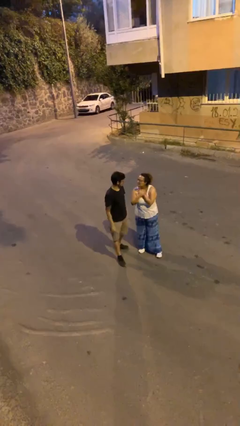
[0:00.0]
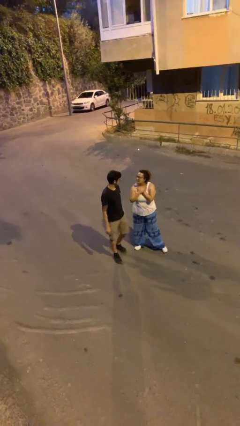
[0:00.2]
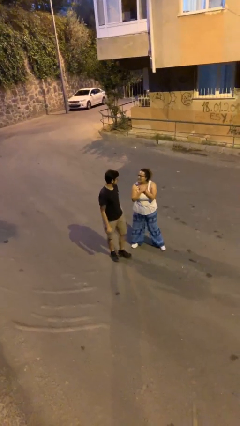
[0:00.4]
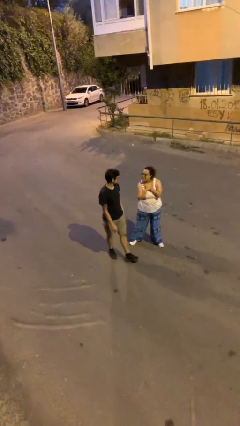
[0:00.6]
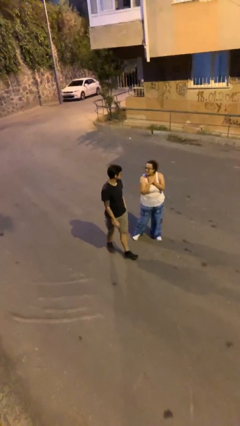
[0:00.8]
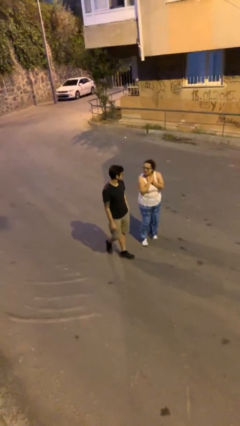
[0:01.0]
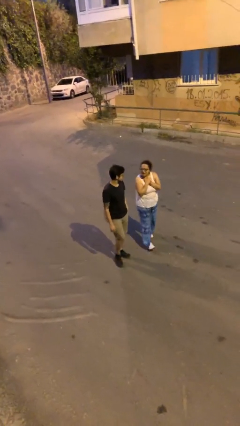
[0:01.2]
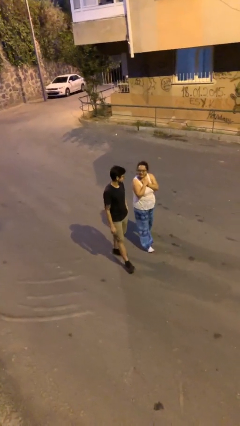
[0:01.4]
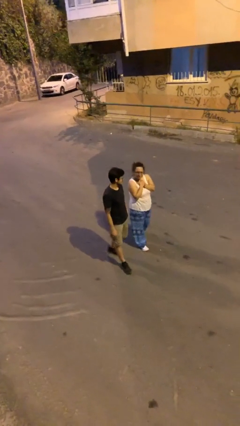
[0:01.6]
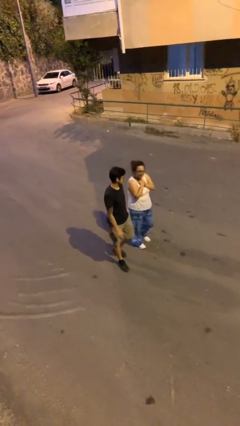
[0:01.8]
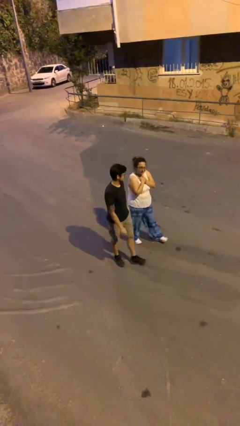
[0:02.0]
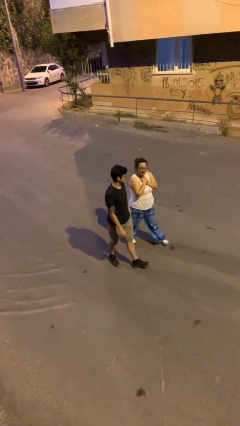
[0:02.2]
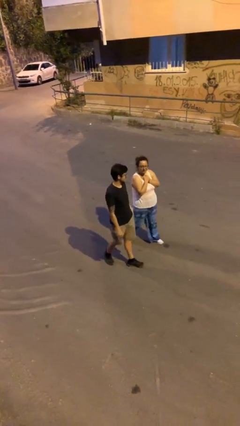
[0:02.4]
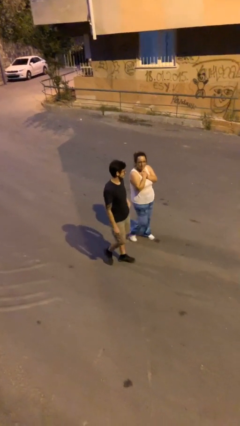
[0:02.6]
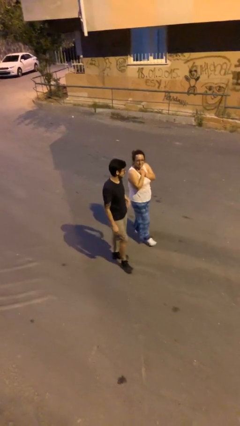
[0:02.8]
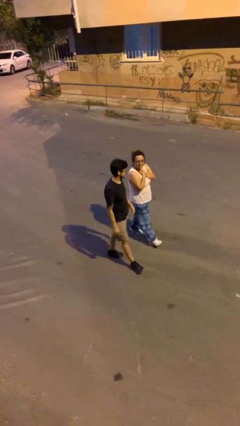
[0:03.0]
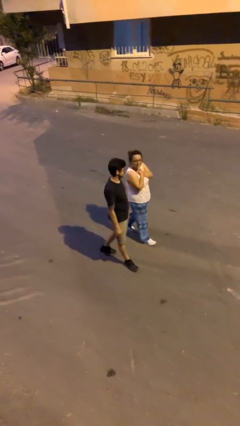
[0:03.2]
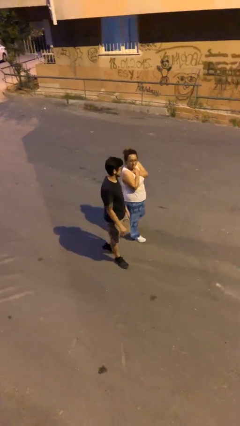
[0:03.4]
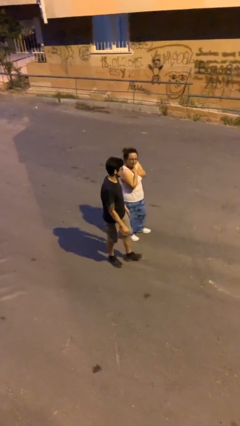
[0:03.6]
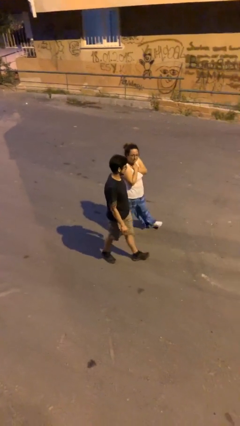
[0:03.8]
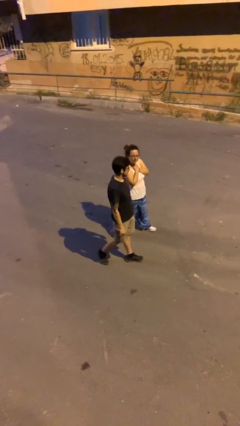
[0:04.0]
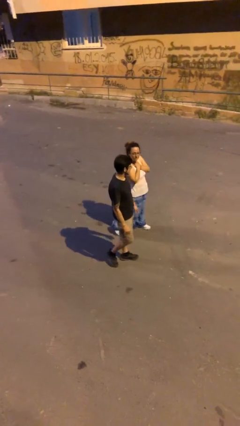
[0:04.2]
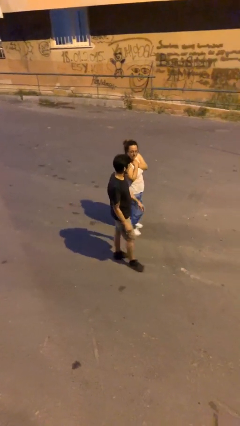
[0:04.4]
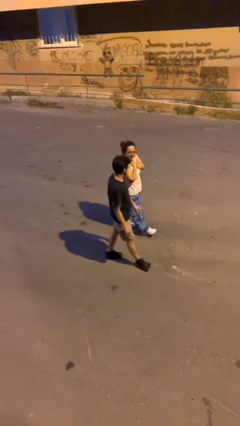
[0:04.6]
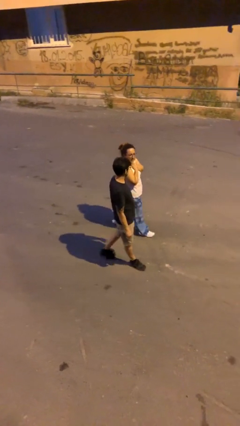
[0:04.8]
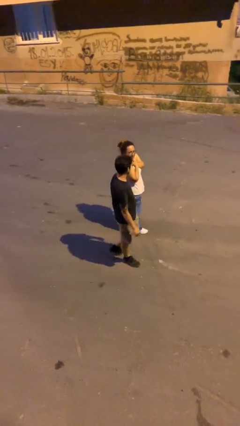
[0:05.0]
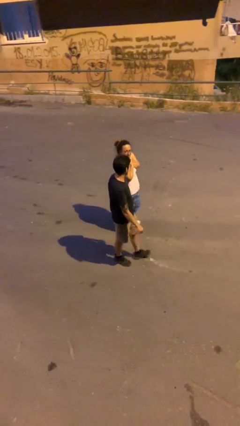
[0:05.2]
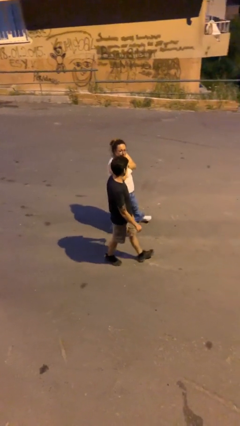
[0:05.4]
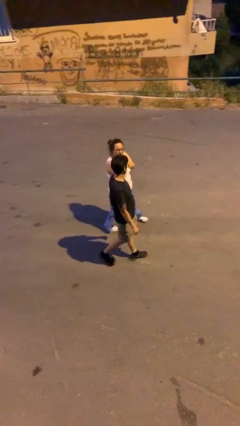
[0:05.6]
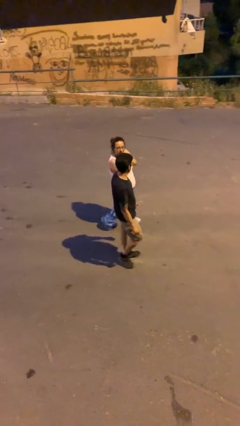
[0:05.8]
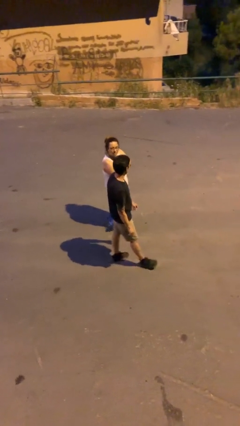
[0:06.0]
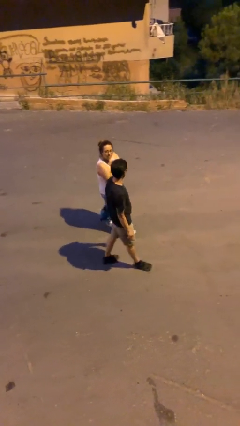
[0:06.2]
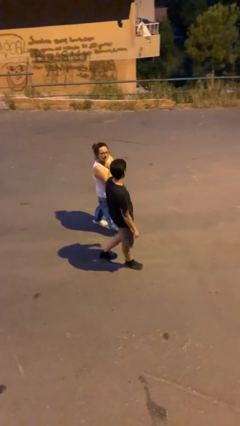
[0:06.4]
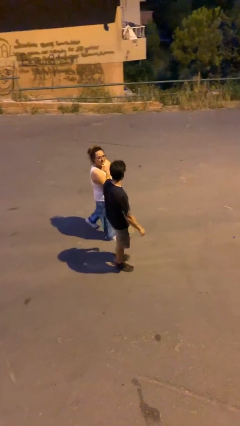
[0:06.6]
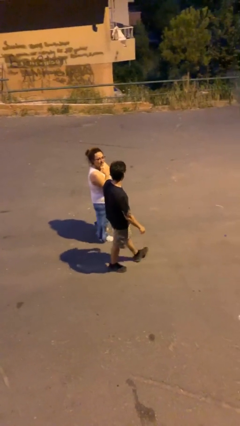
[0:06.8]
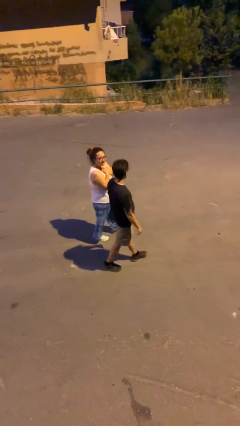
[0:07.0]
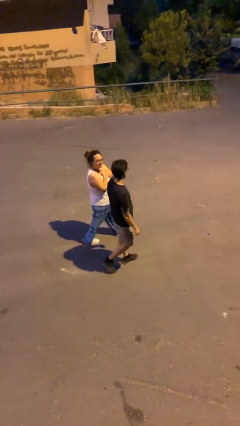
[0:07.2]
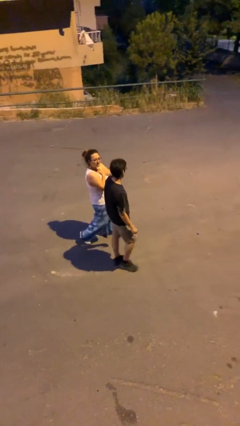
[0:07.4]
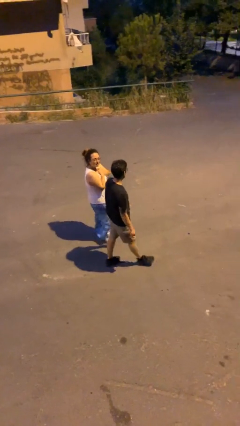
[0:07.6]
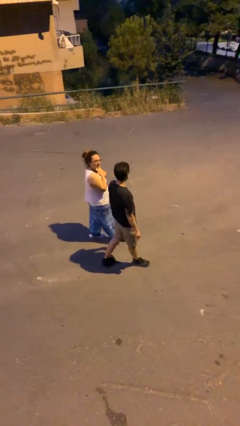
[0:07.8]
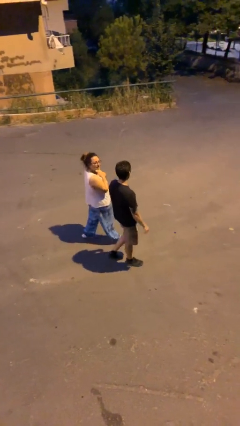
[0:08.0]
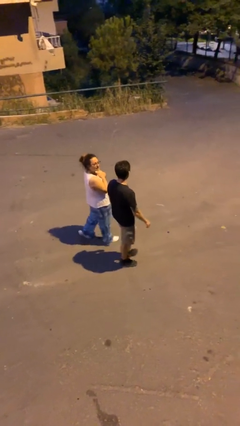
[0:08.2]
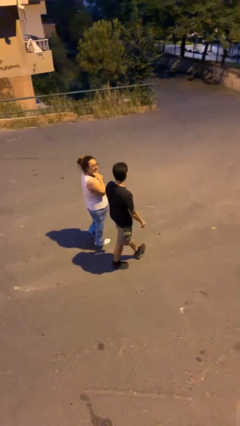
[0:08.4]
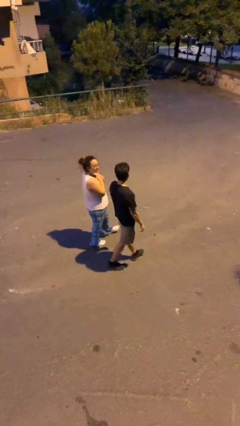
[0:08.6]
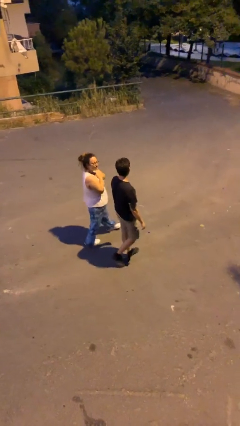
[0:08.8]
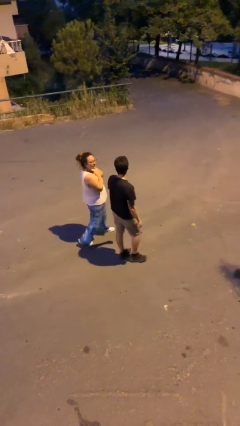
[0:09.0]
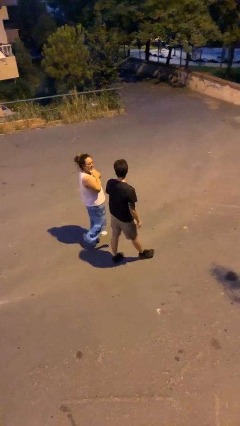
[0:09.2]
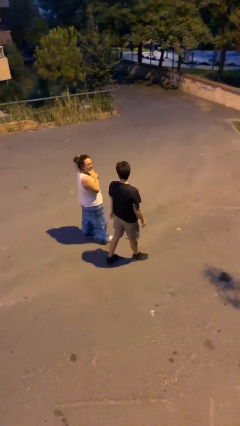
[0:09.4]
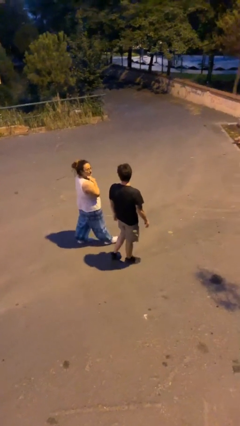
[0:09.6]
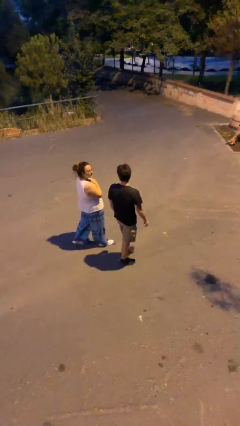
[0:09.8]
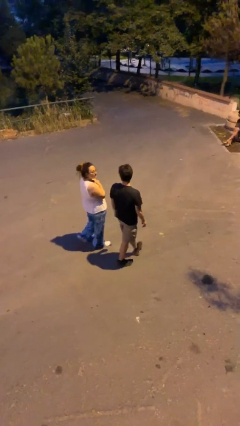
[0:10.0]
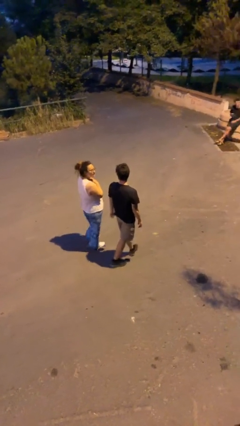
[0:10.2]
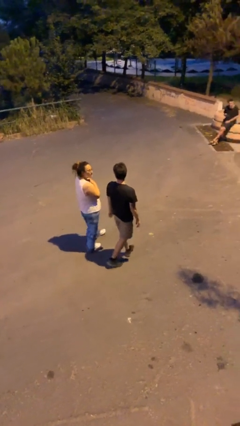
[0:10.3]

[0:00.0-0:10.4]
person talks to person

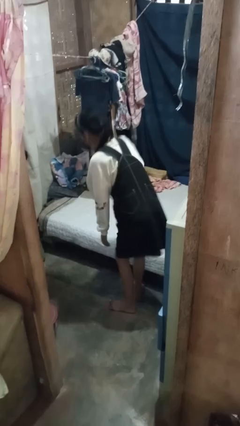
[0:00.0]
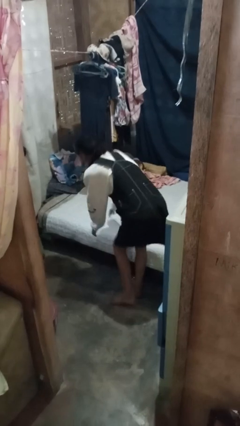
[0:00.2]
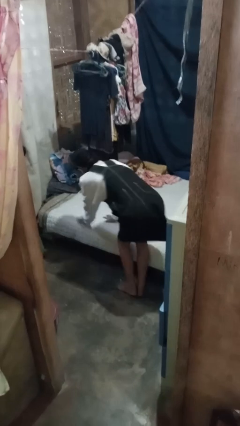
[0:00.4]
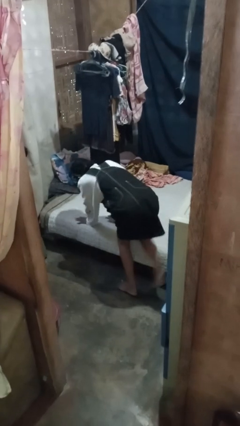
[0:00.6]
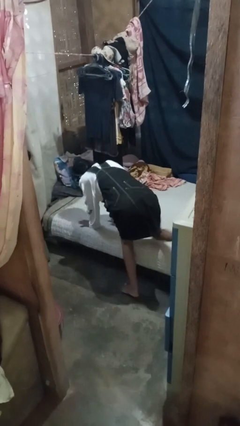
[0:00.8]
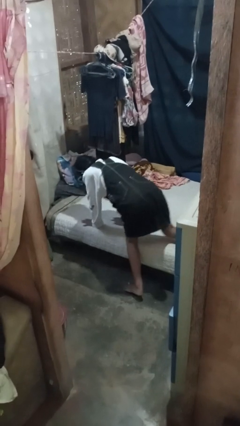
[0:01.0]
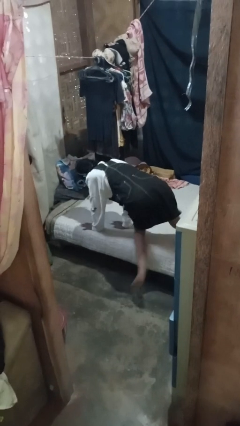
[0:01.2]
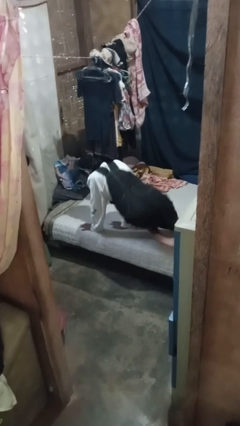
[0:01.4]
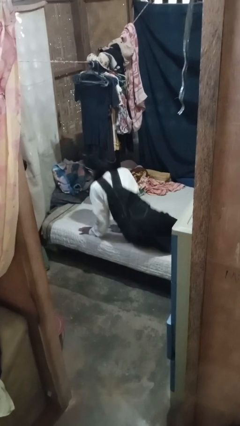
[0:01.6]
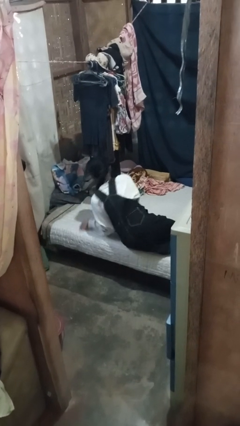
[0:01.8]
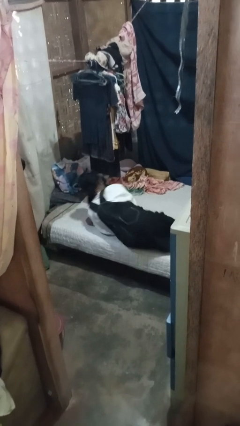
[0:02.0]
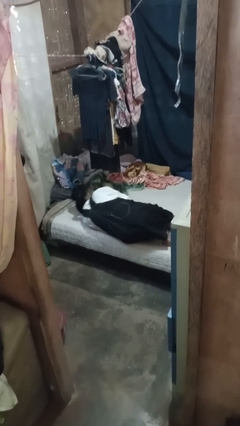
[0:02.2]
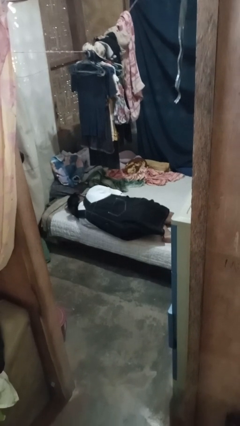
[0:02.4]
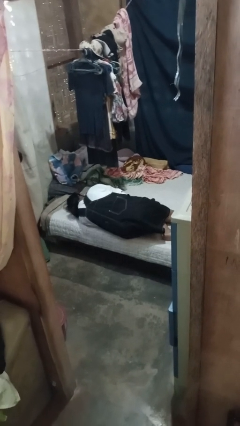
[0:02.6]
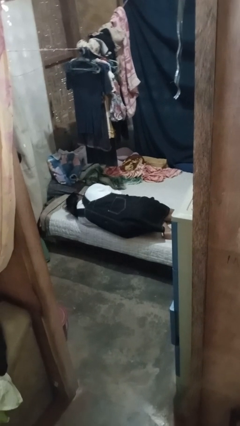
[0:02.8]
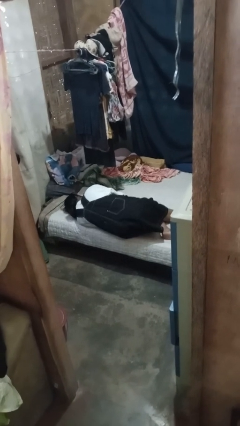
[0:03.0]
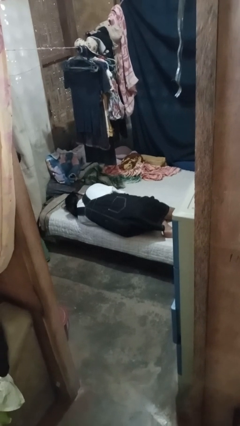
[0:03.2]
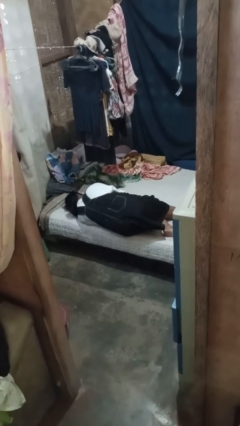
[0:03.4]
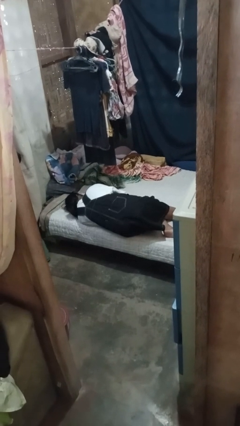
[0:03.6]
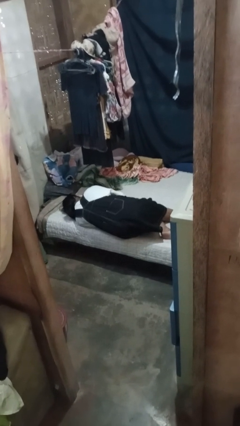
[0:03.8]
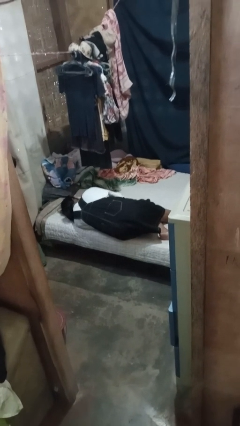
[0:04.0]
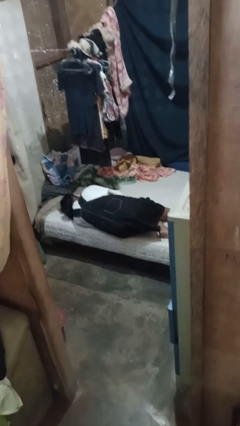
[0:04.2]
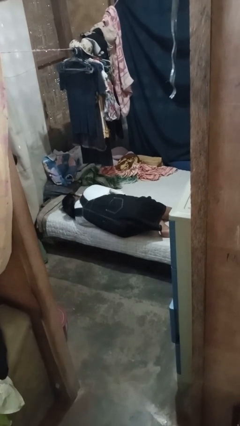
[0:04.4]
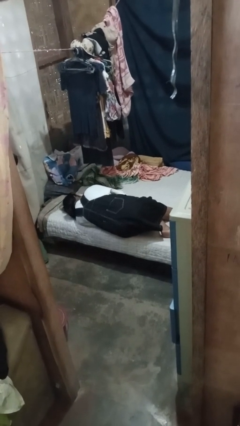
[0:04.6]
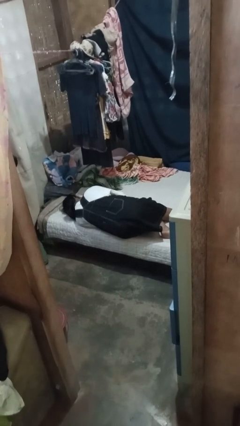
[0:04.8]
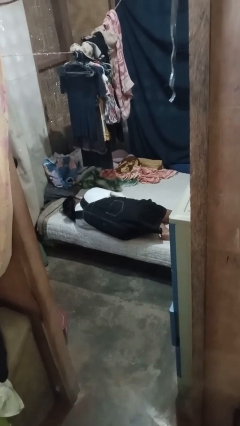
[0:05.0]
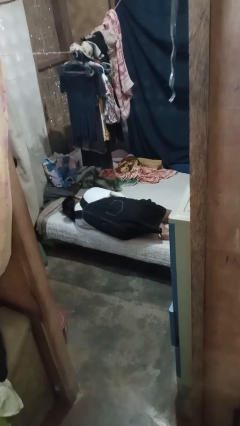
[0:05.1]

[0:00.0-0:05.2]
person lies down on bed

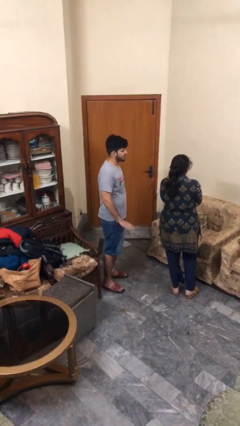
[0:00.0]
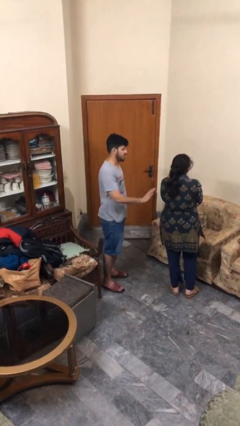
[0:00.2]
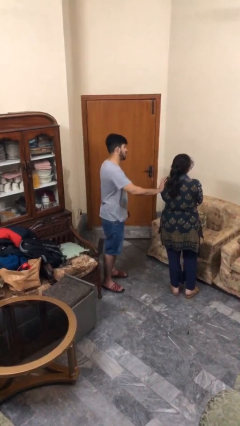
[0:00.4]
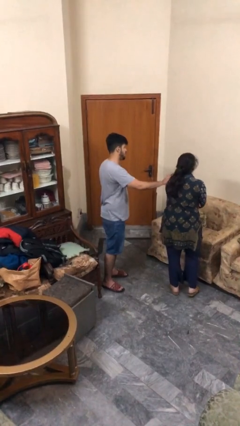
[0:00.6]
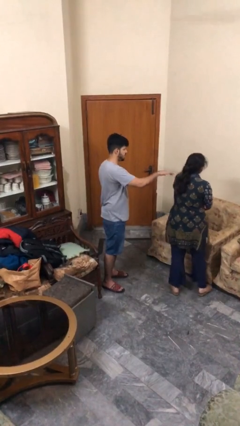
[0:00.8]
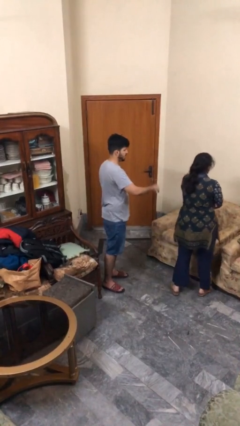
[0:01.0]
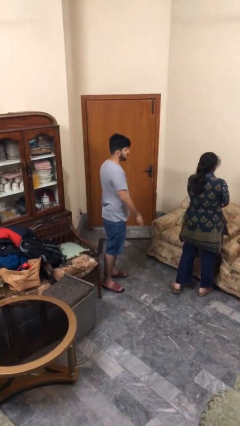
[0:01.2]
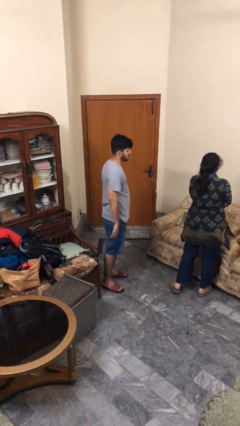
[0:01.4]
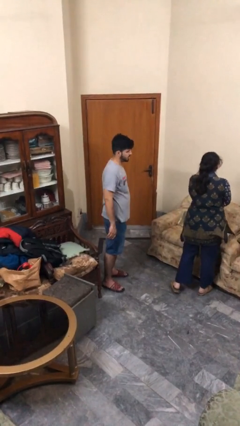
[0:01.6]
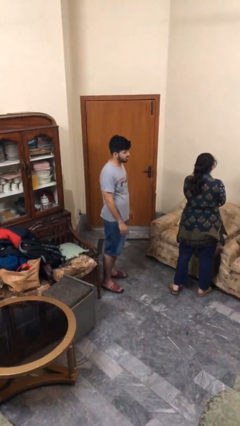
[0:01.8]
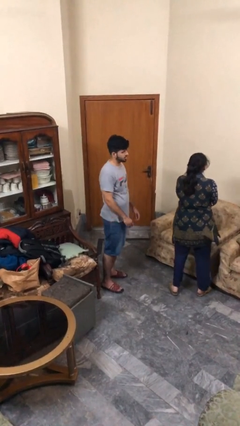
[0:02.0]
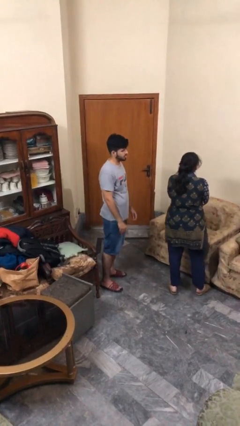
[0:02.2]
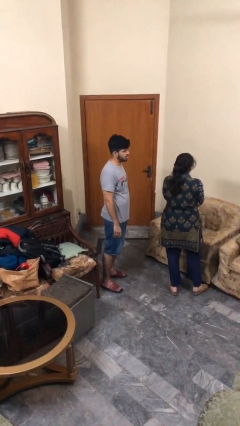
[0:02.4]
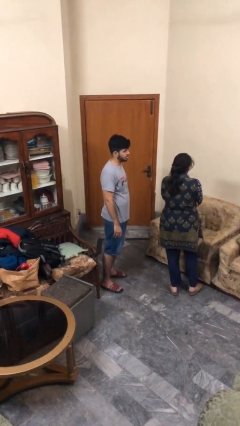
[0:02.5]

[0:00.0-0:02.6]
person shoves person
